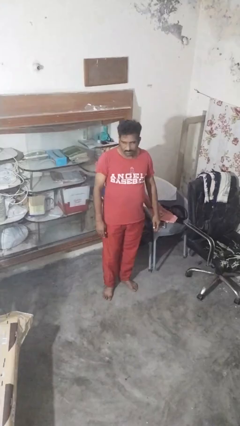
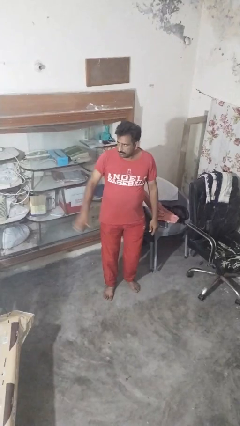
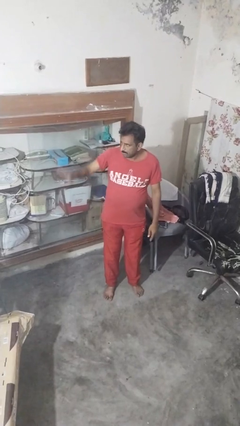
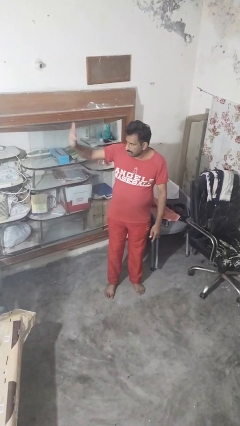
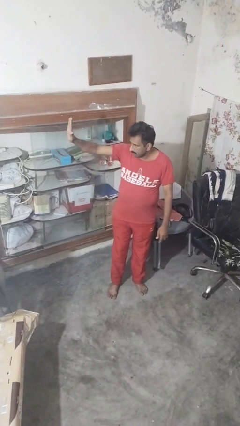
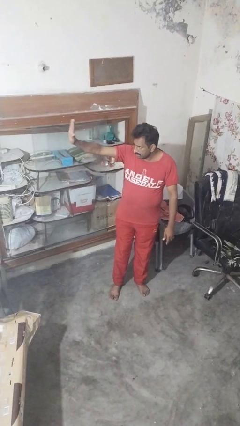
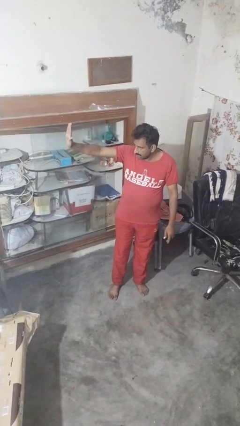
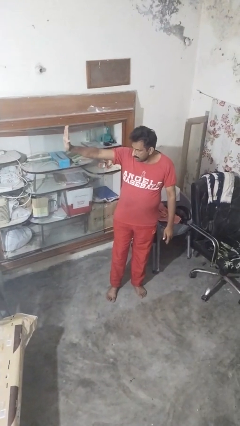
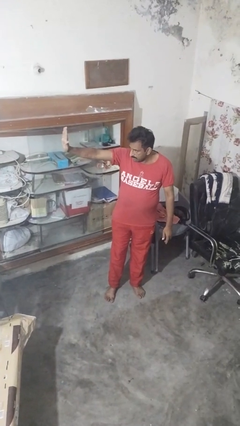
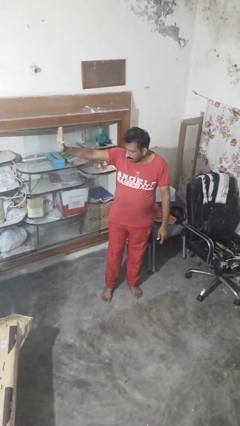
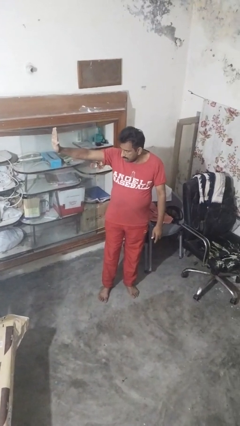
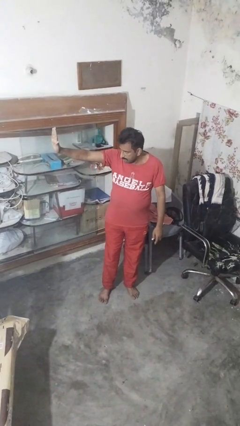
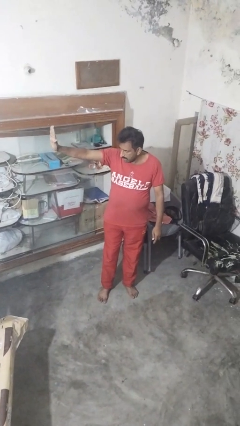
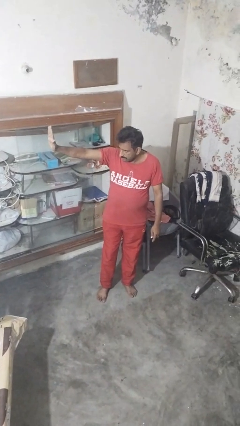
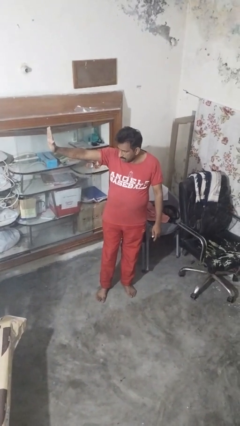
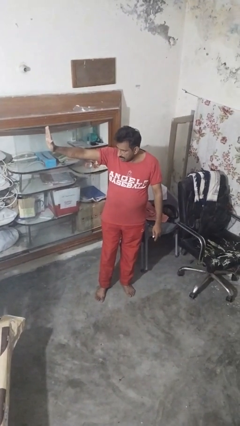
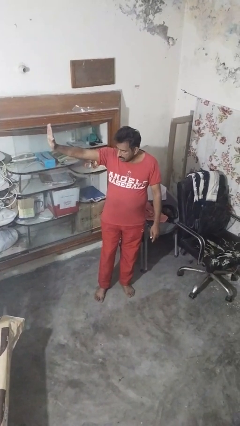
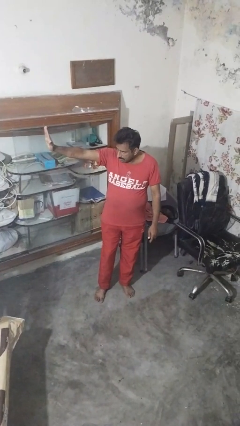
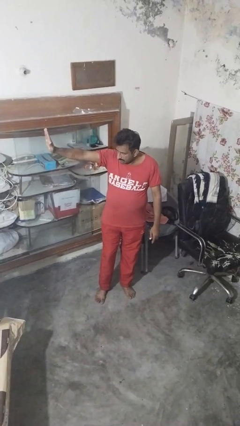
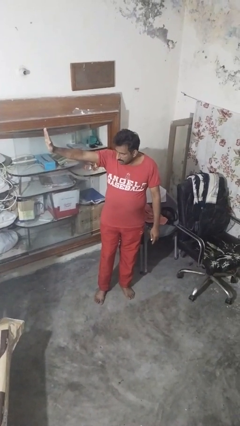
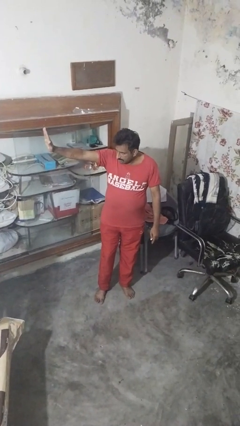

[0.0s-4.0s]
person gestures stop

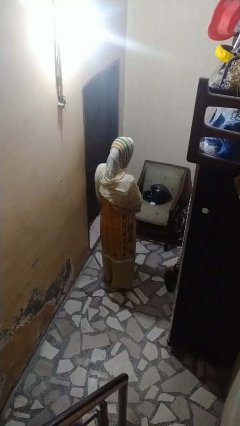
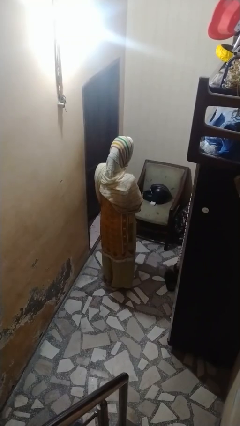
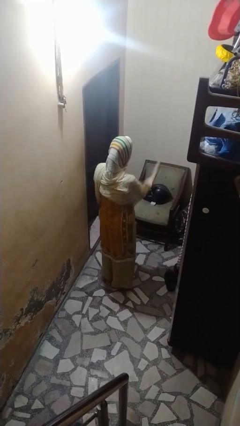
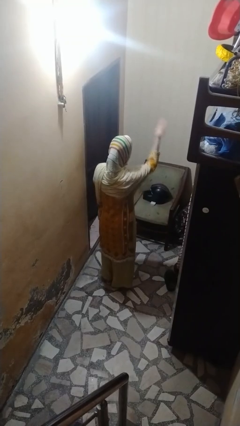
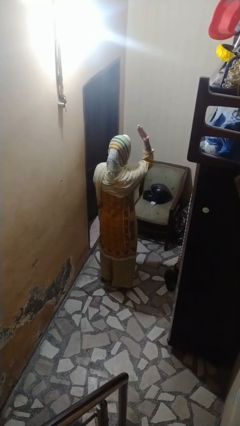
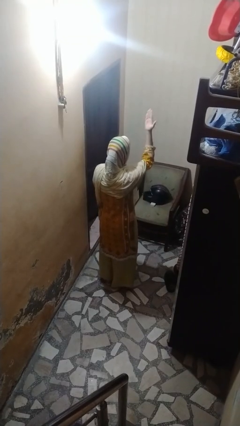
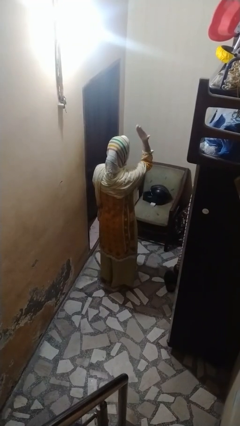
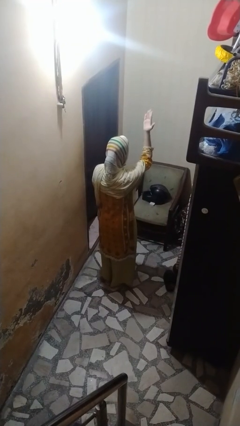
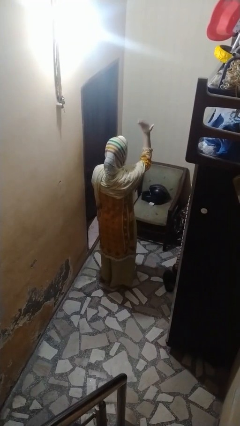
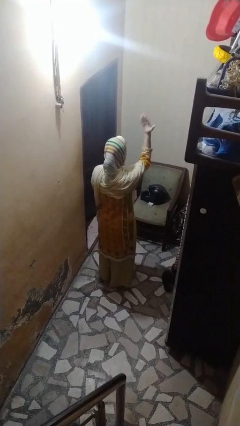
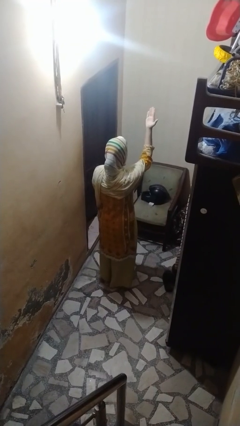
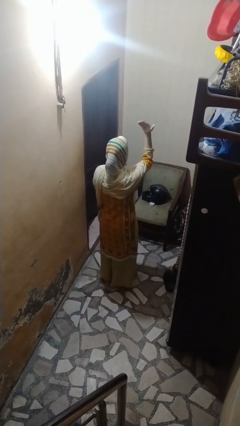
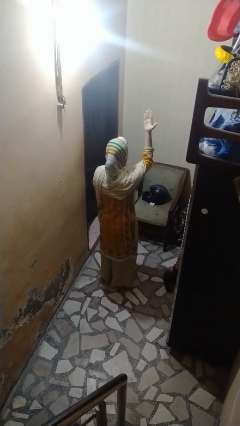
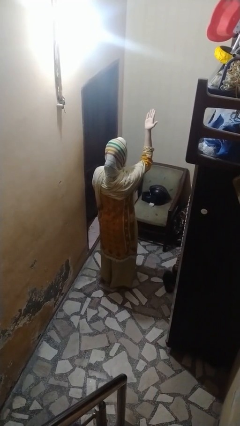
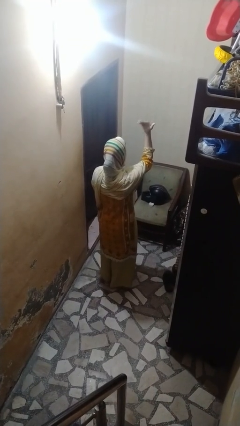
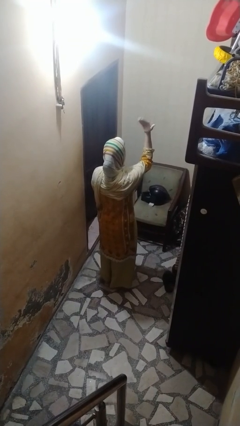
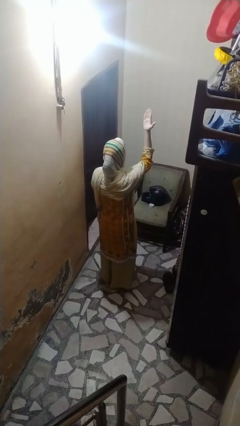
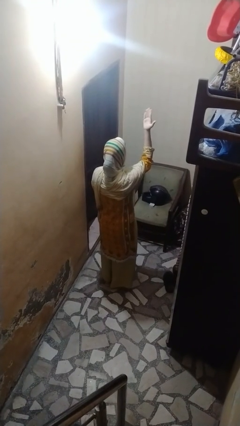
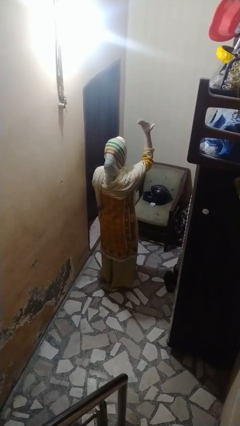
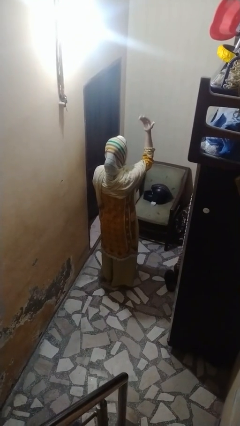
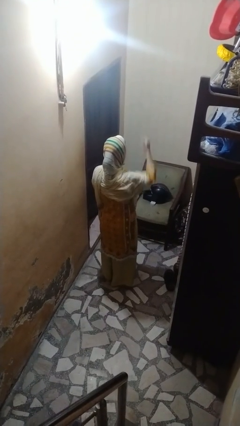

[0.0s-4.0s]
person gestures come here

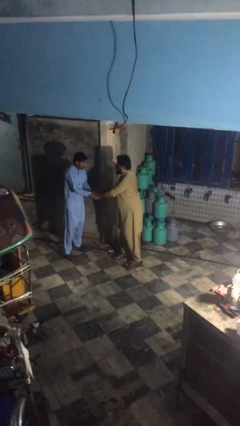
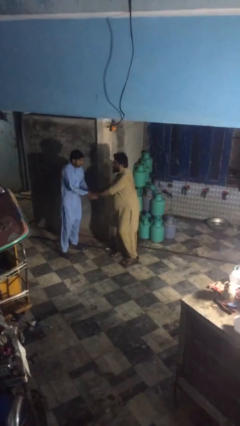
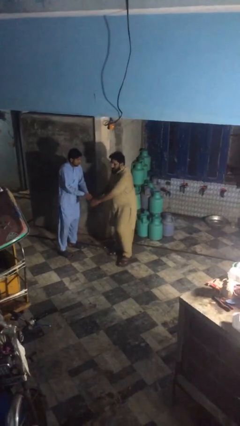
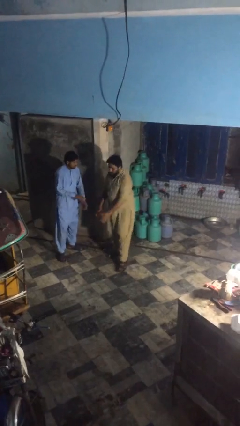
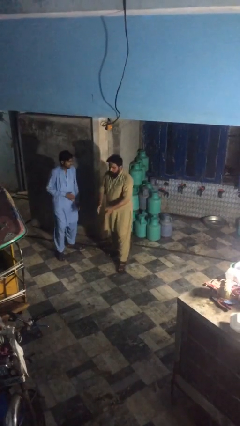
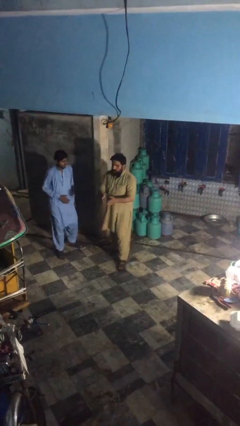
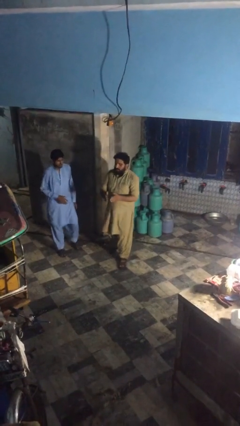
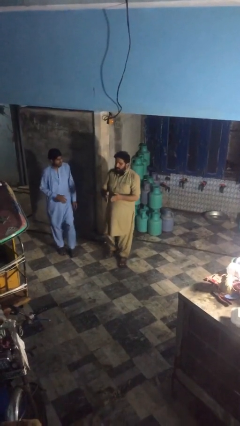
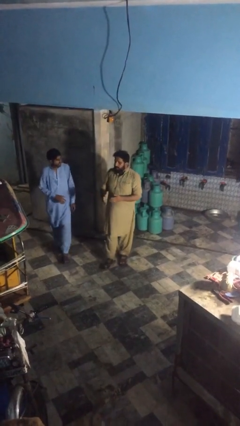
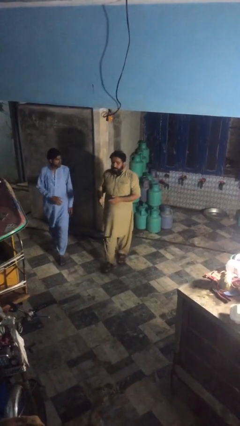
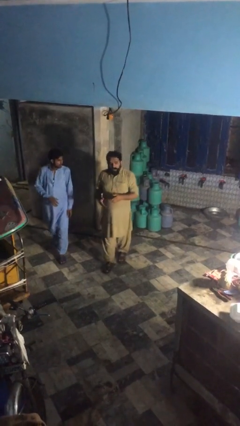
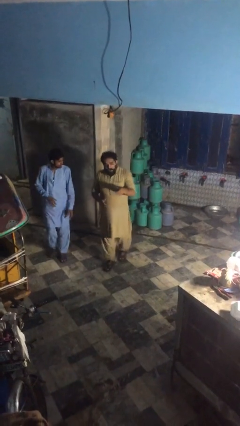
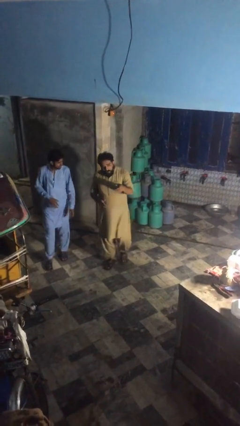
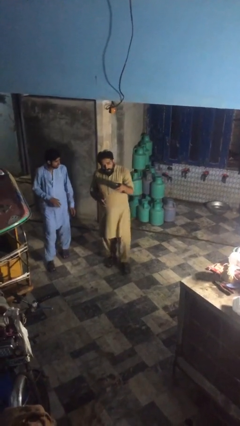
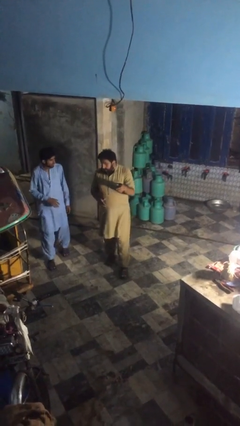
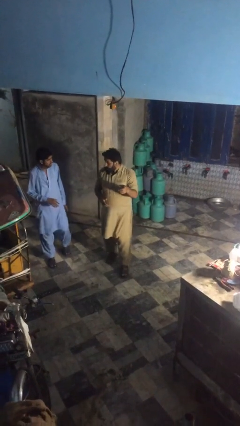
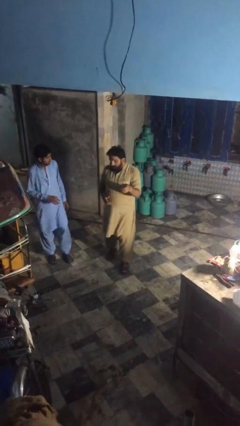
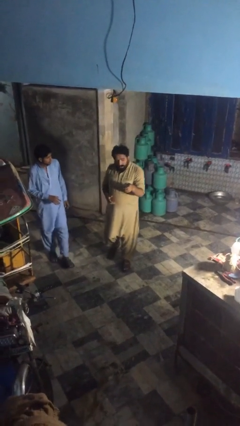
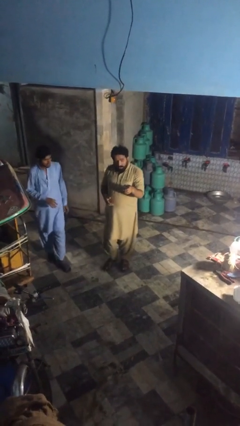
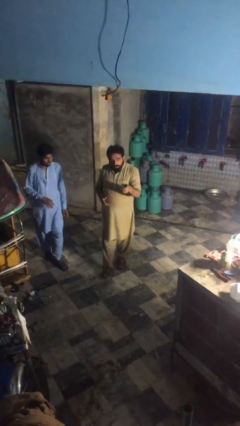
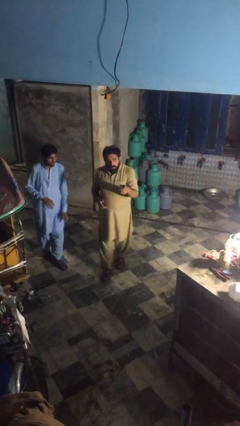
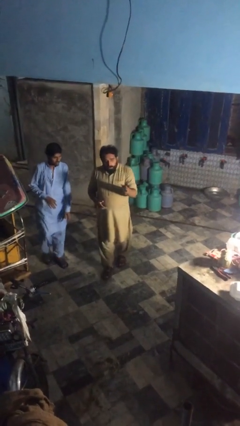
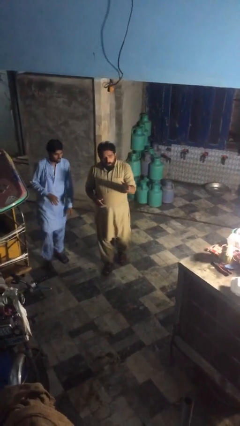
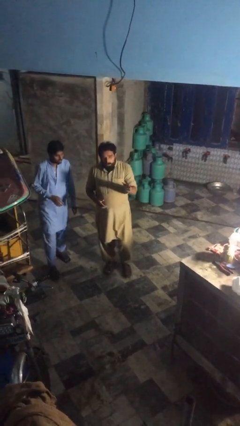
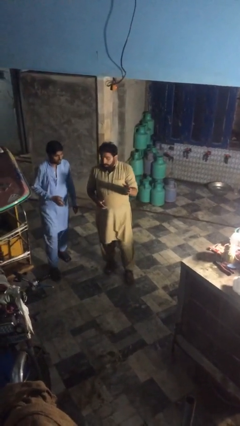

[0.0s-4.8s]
person talks to person

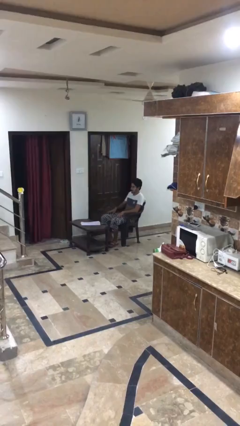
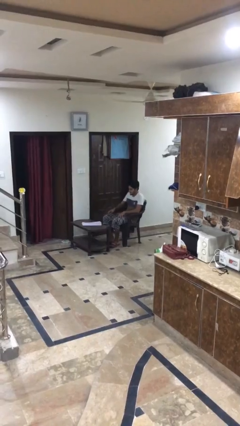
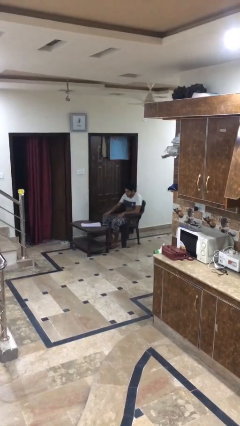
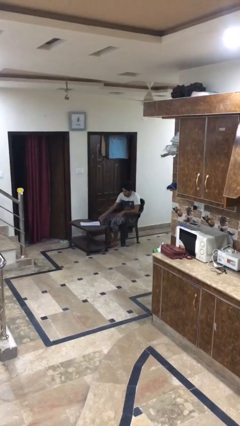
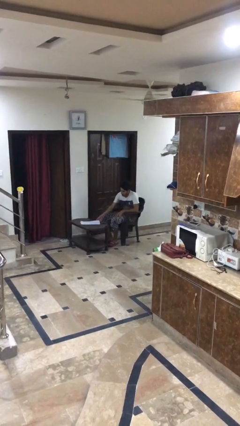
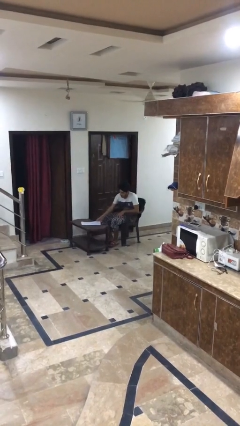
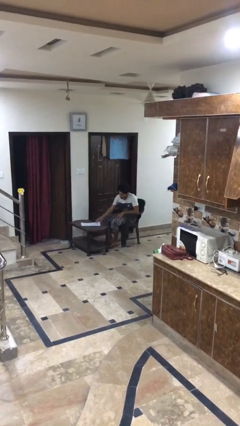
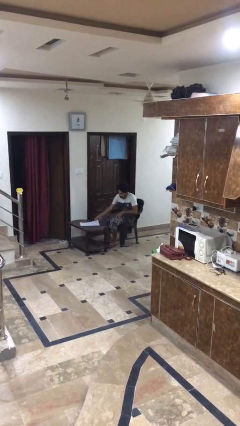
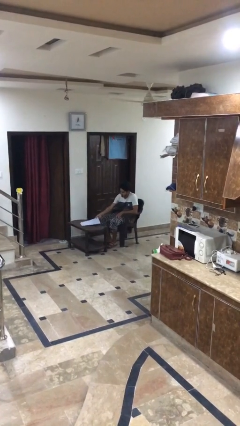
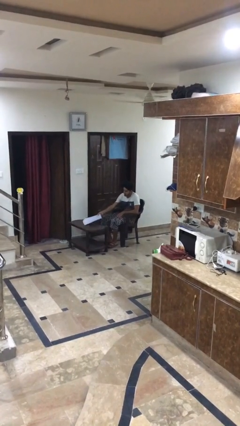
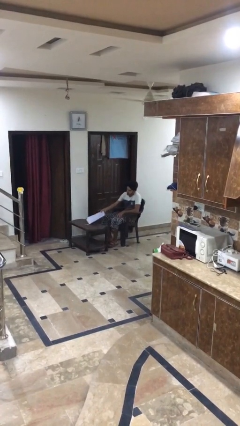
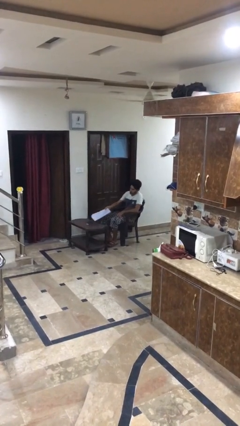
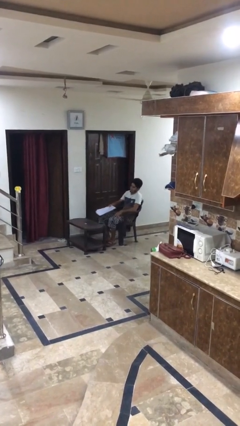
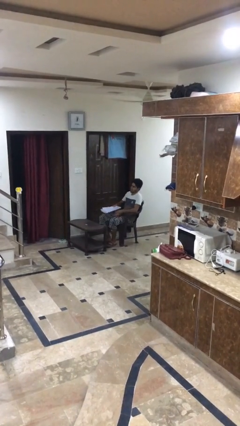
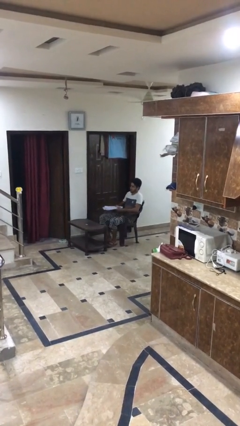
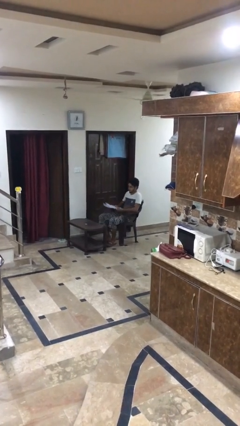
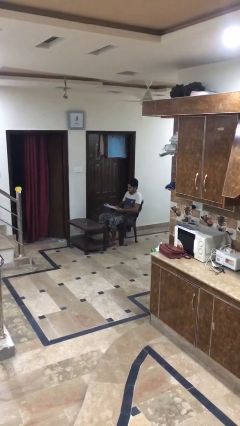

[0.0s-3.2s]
person picks up object from table

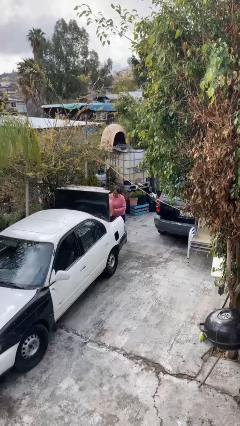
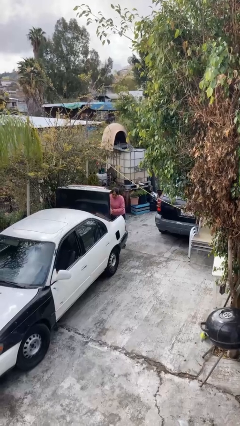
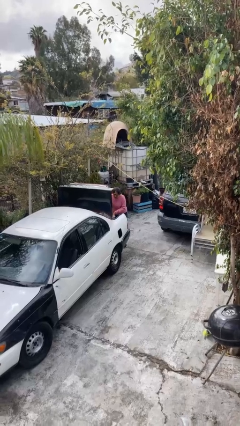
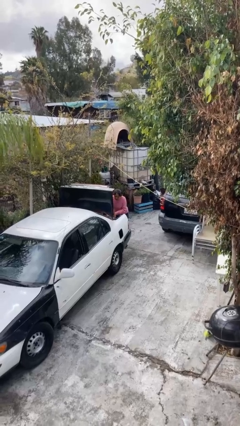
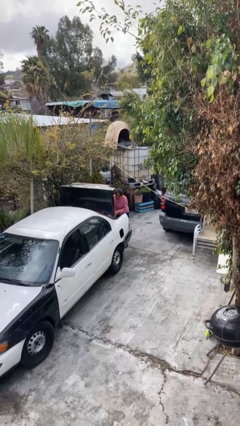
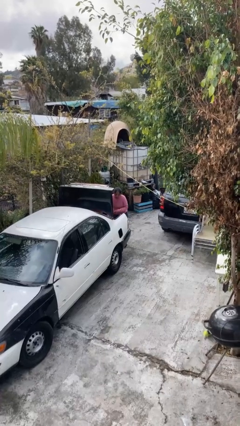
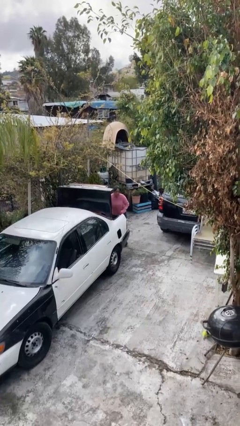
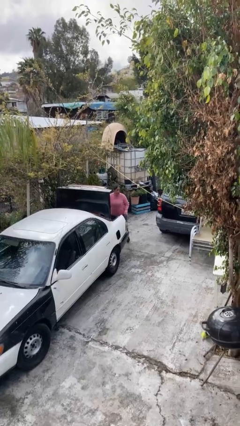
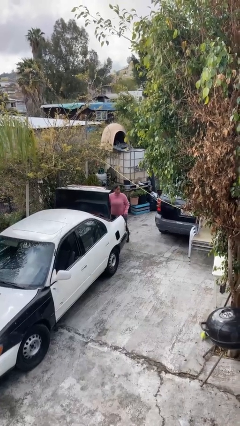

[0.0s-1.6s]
person loads car

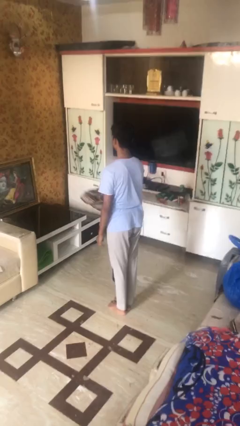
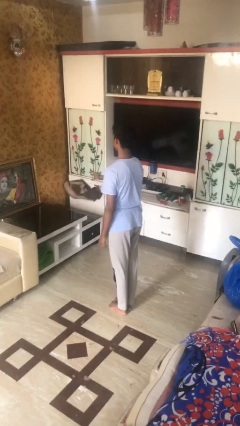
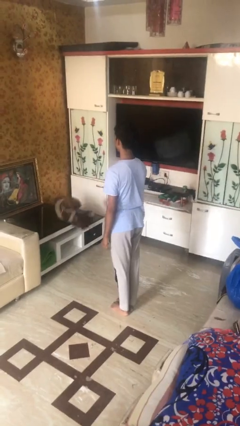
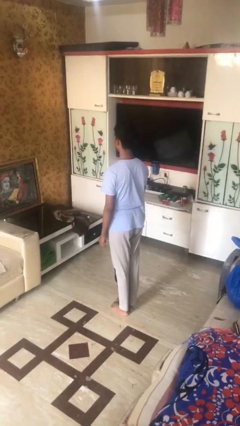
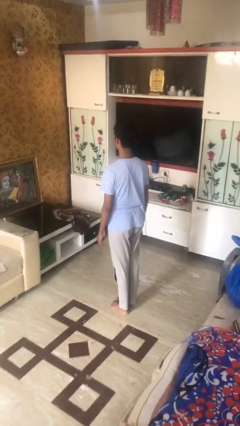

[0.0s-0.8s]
person throws object on table
